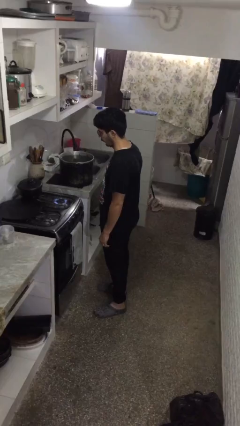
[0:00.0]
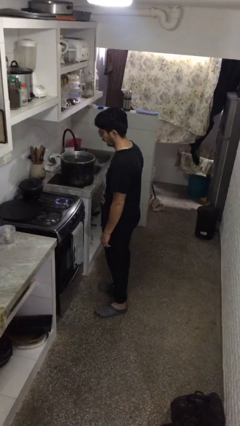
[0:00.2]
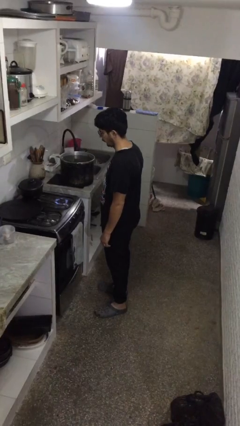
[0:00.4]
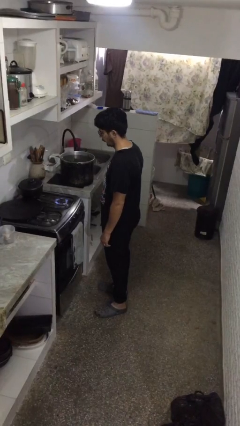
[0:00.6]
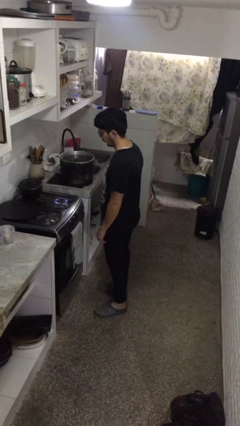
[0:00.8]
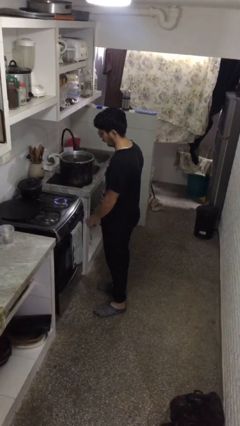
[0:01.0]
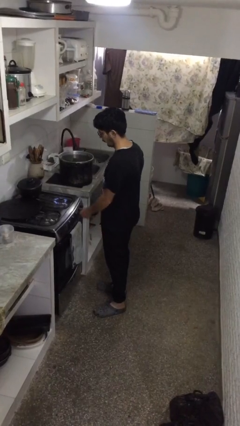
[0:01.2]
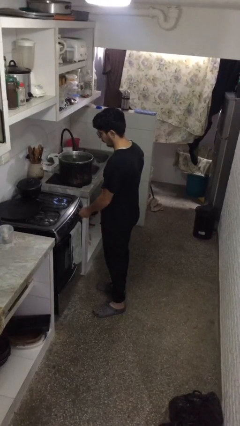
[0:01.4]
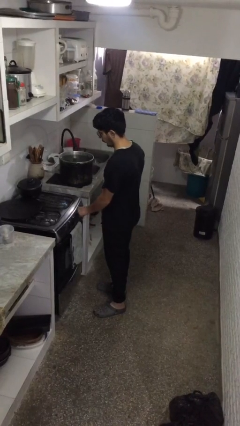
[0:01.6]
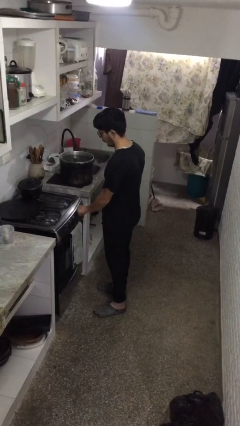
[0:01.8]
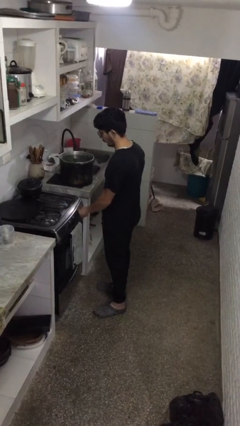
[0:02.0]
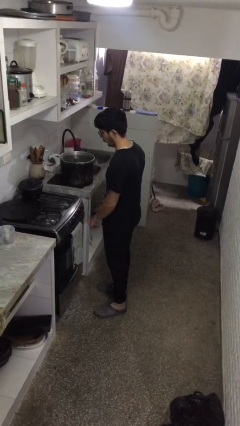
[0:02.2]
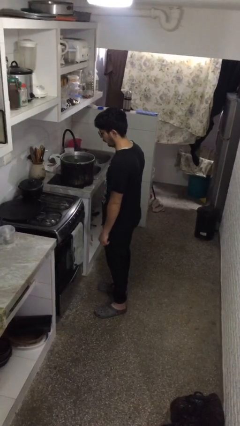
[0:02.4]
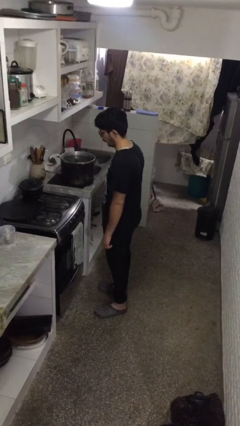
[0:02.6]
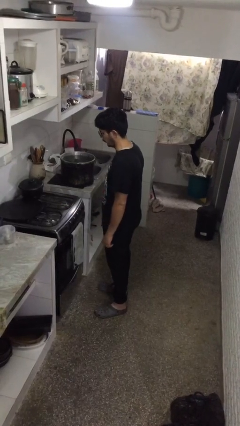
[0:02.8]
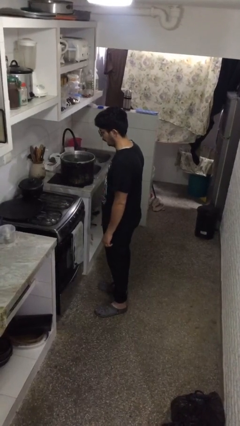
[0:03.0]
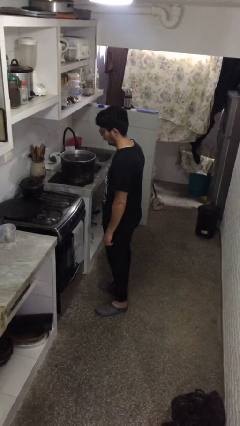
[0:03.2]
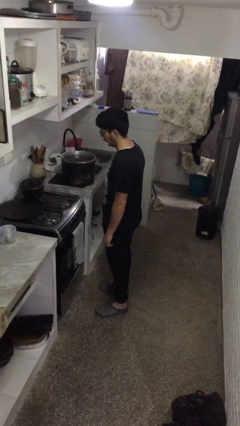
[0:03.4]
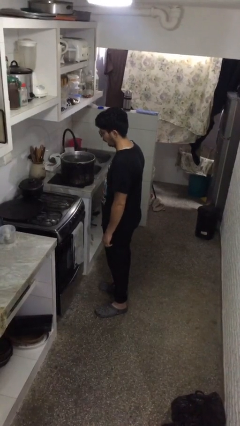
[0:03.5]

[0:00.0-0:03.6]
person turns off stovetop

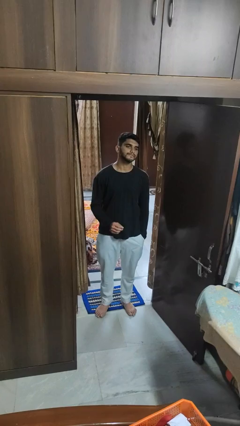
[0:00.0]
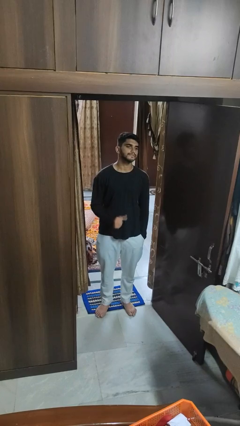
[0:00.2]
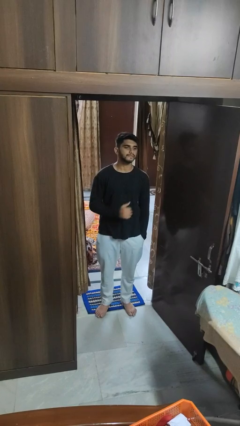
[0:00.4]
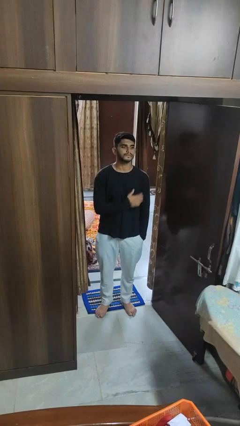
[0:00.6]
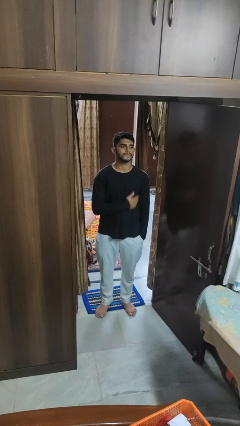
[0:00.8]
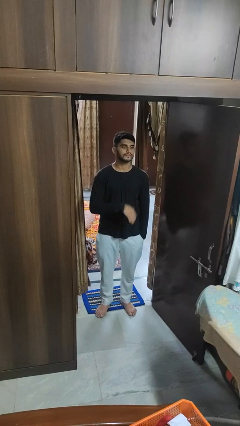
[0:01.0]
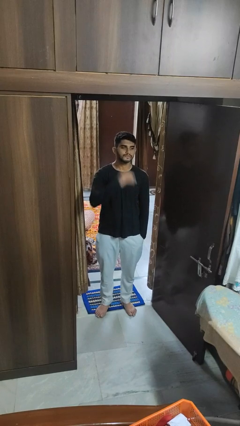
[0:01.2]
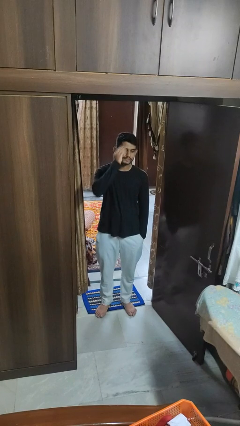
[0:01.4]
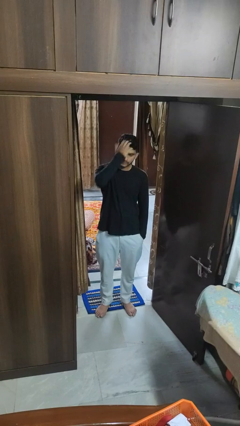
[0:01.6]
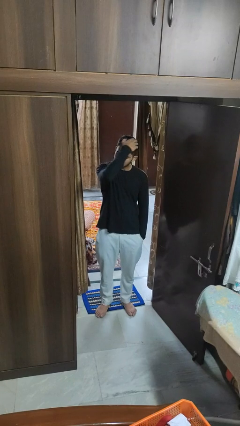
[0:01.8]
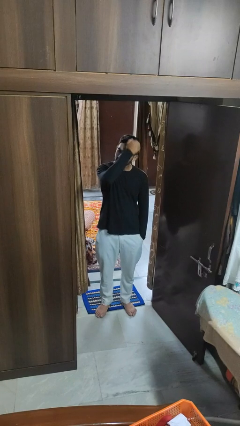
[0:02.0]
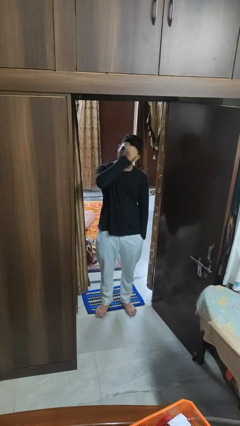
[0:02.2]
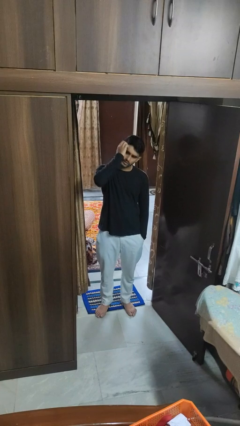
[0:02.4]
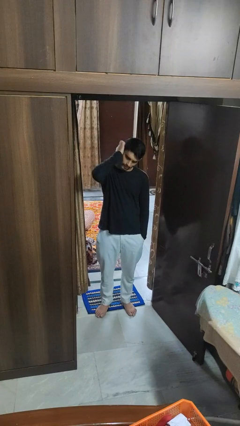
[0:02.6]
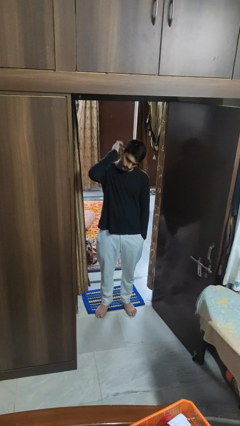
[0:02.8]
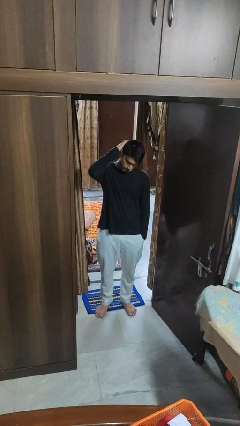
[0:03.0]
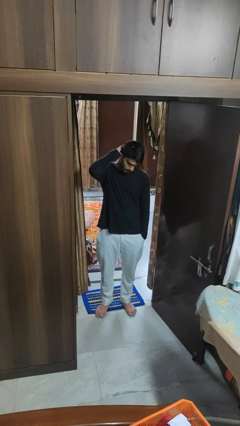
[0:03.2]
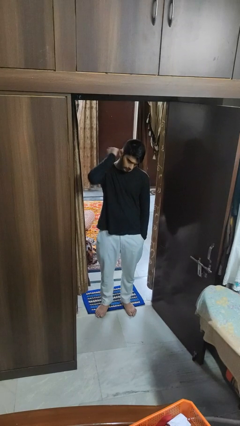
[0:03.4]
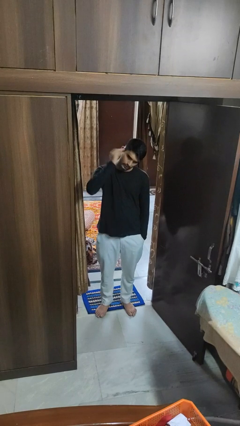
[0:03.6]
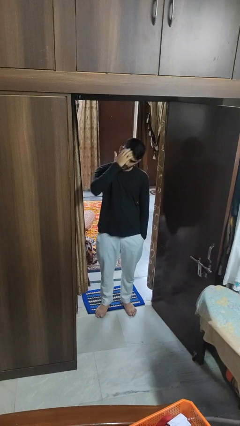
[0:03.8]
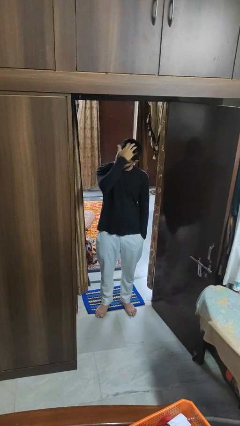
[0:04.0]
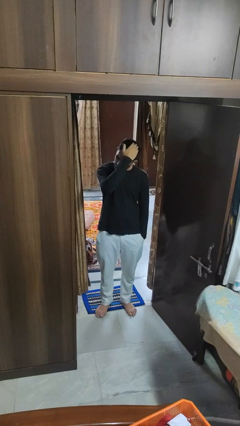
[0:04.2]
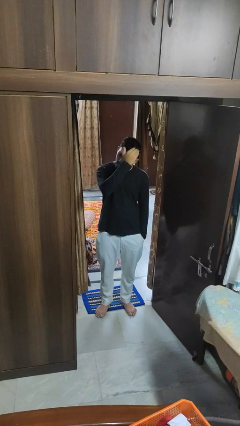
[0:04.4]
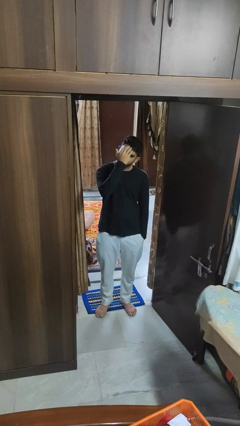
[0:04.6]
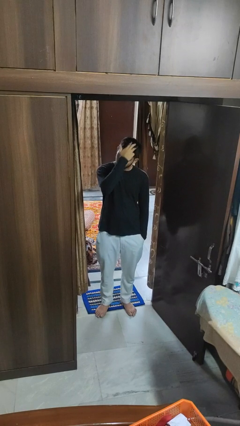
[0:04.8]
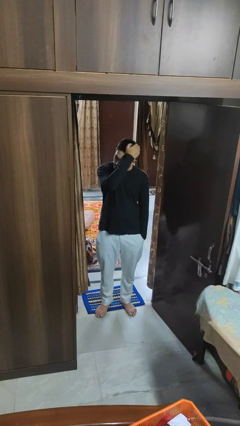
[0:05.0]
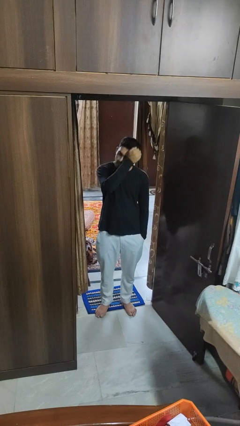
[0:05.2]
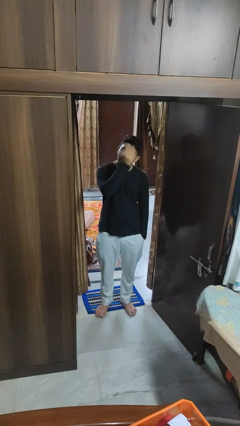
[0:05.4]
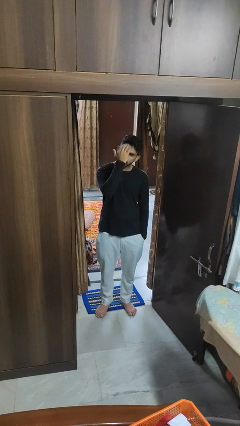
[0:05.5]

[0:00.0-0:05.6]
person strokes hair

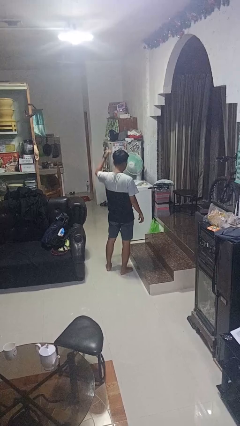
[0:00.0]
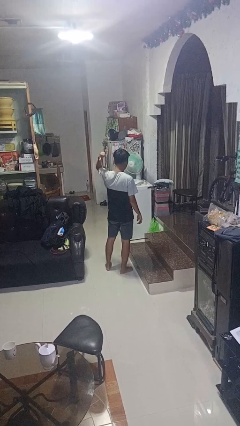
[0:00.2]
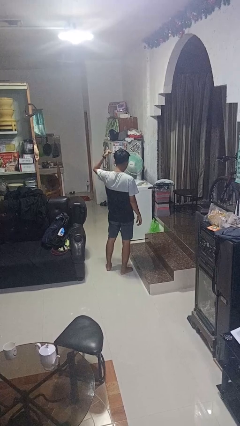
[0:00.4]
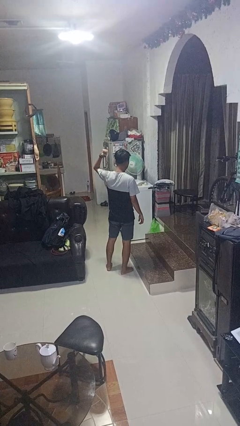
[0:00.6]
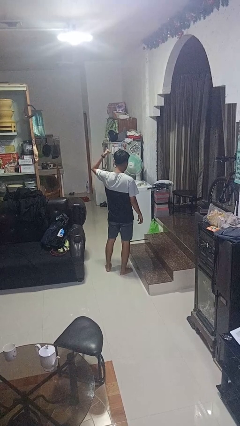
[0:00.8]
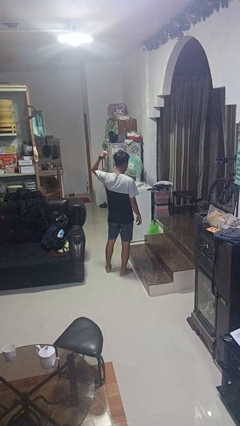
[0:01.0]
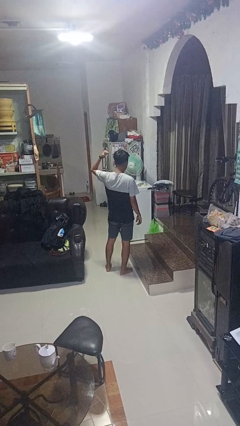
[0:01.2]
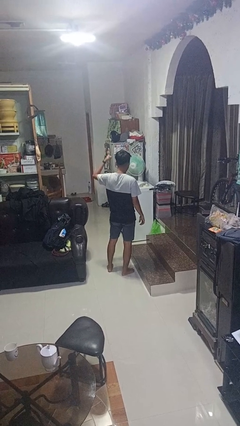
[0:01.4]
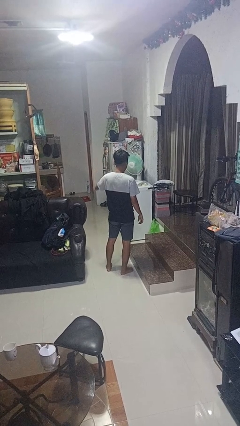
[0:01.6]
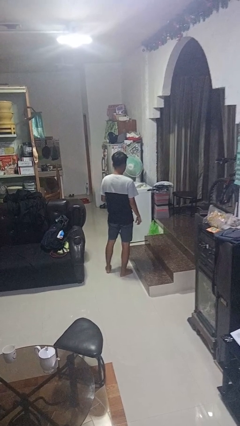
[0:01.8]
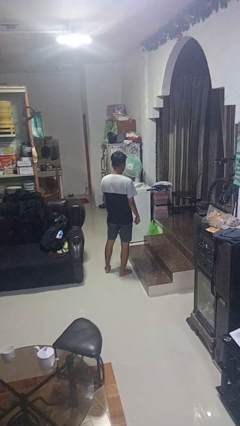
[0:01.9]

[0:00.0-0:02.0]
person gestures behind me

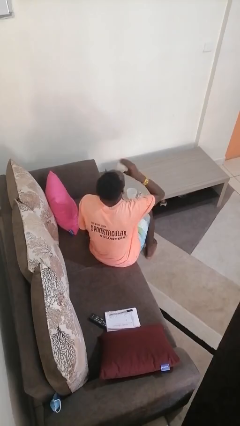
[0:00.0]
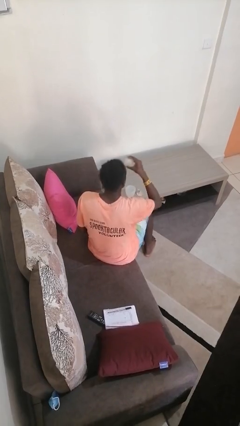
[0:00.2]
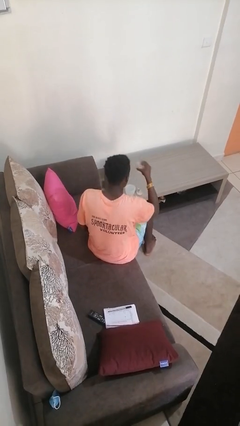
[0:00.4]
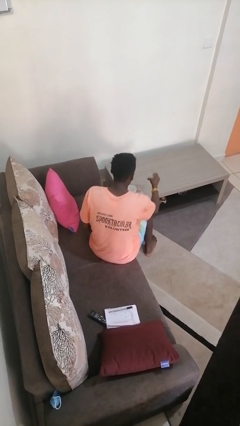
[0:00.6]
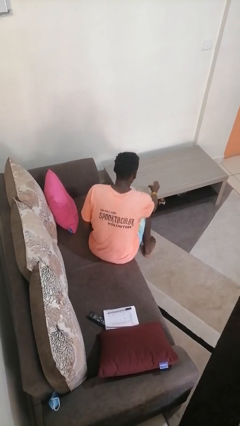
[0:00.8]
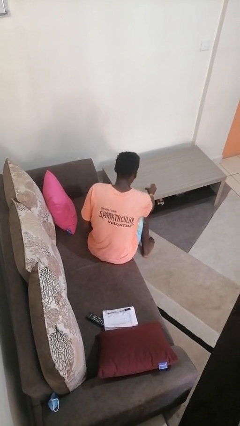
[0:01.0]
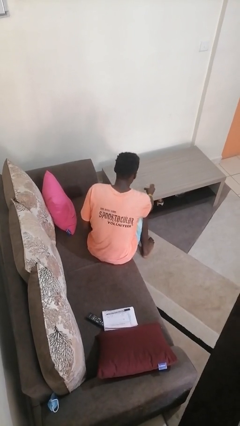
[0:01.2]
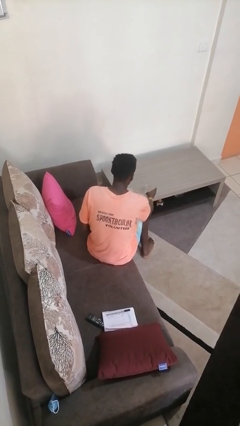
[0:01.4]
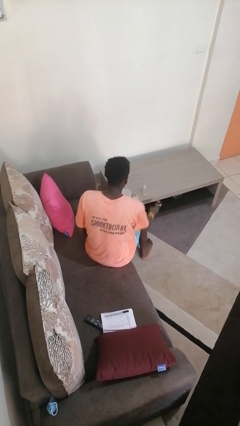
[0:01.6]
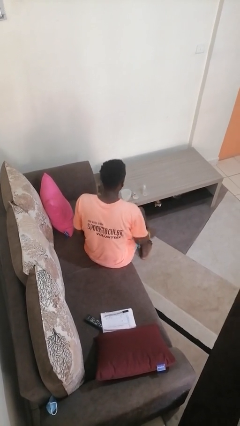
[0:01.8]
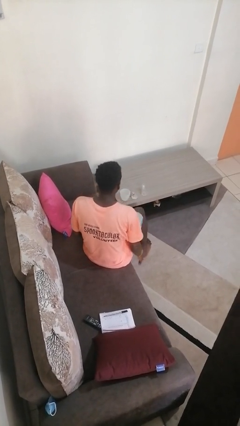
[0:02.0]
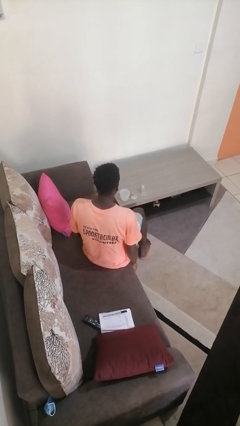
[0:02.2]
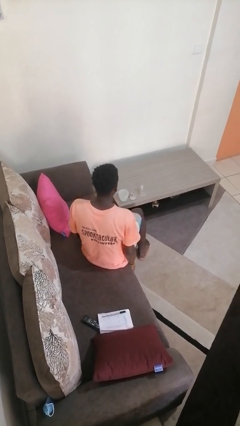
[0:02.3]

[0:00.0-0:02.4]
person puts down object on table

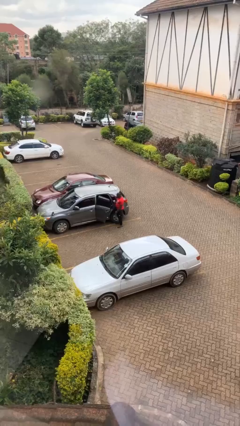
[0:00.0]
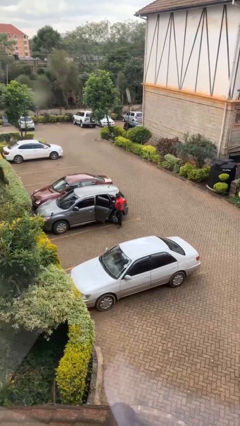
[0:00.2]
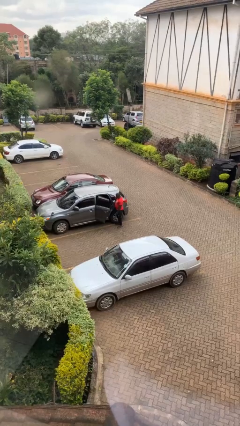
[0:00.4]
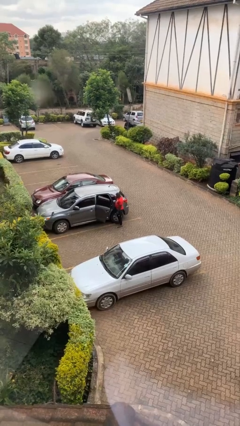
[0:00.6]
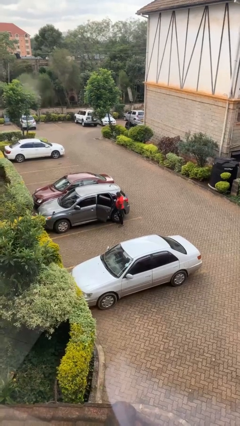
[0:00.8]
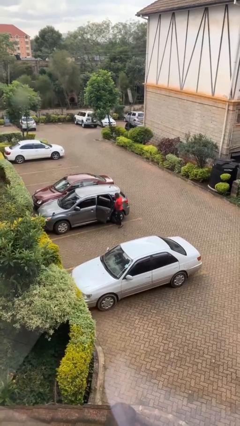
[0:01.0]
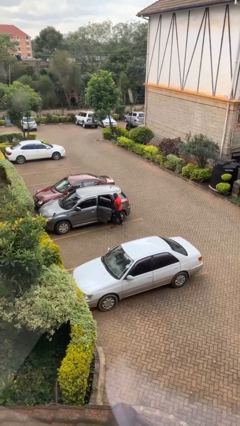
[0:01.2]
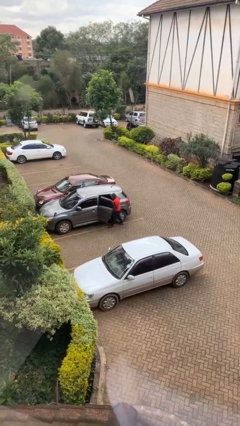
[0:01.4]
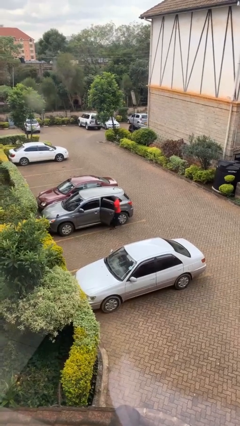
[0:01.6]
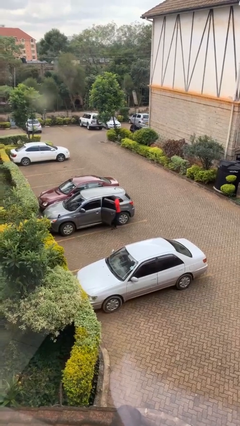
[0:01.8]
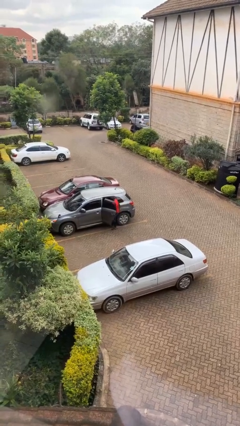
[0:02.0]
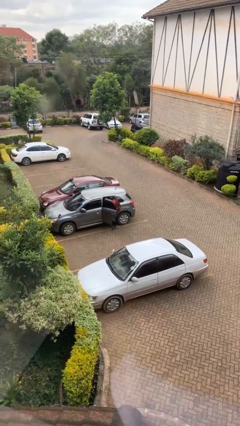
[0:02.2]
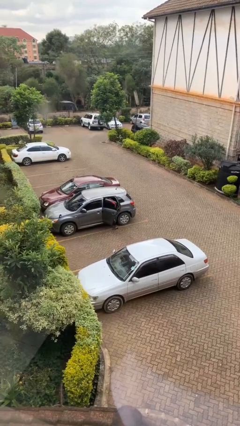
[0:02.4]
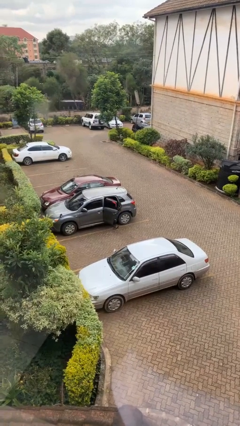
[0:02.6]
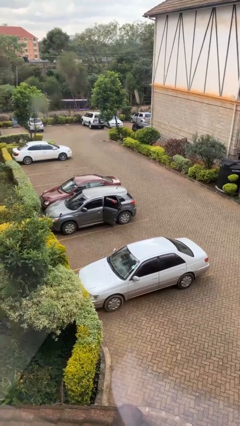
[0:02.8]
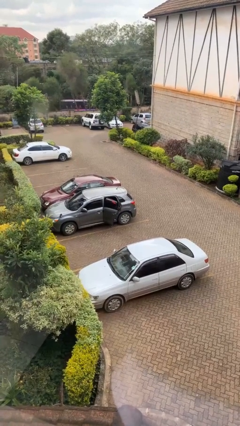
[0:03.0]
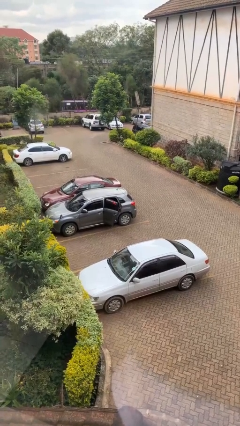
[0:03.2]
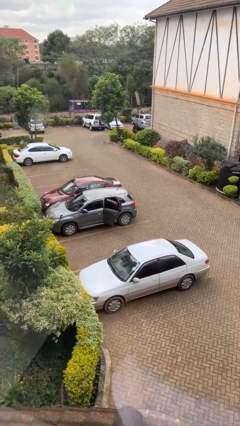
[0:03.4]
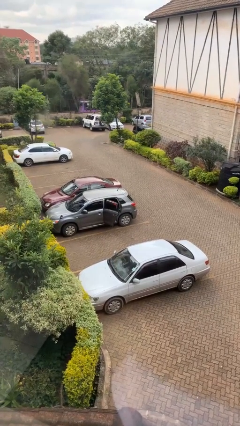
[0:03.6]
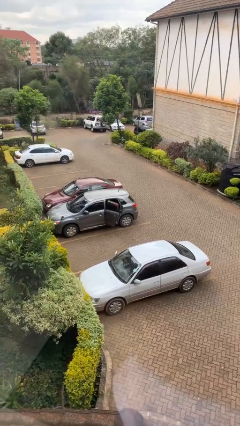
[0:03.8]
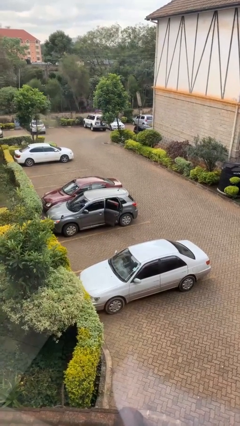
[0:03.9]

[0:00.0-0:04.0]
person enters car
